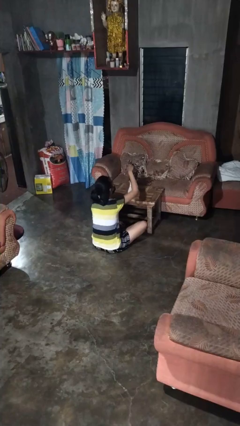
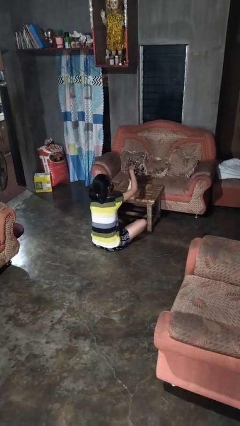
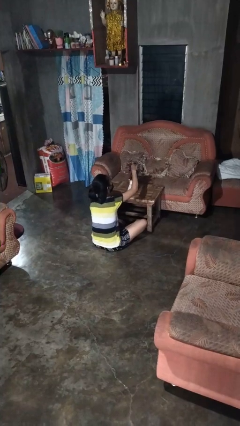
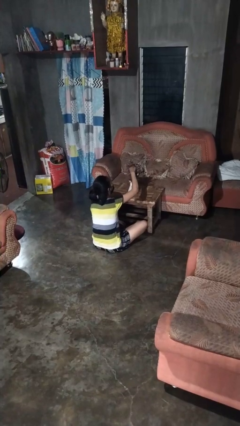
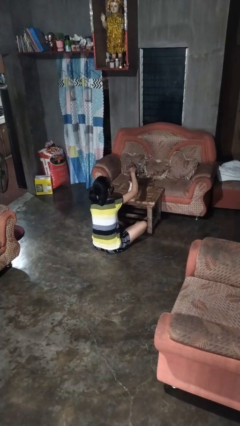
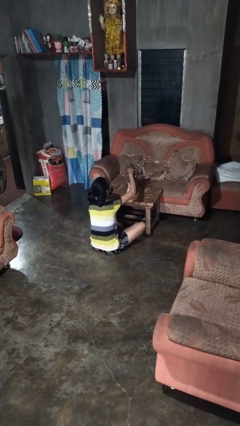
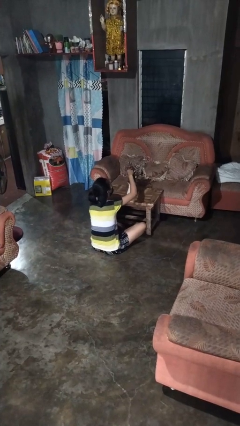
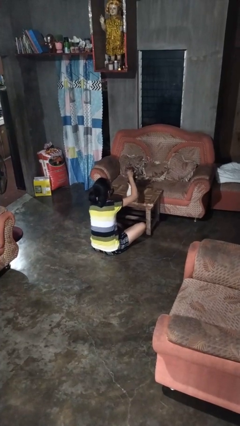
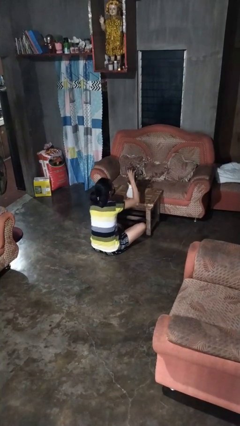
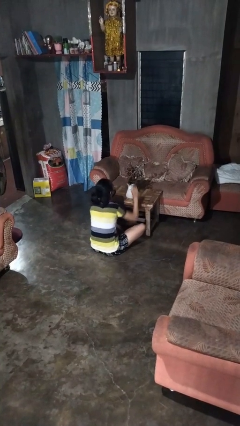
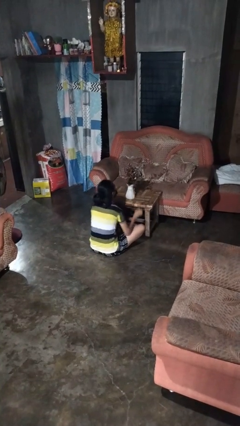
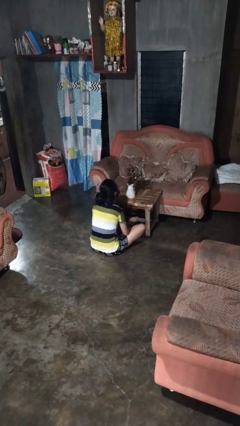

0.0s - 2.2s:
person arranges flowers in vase

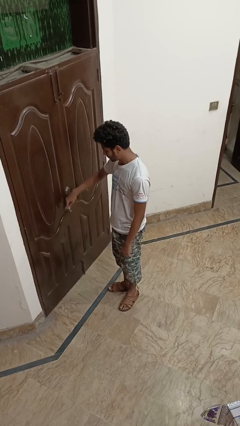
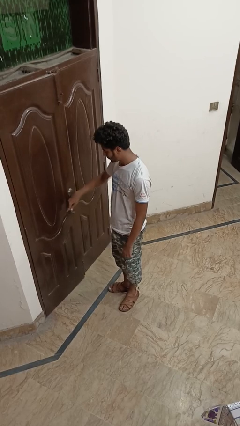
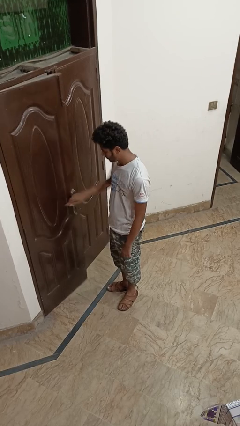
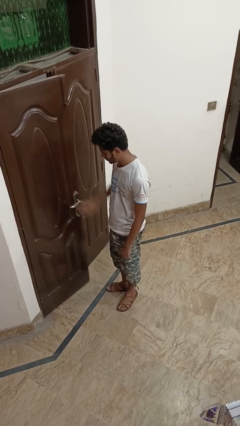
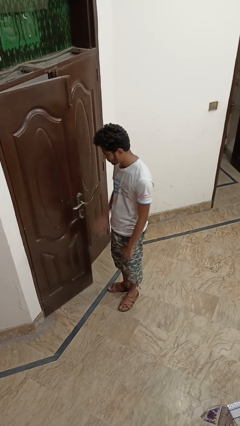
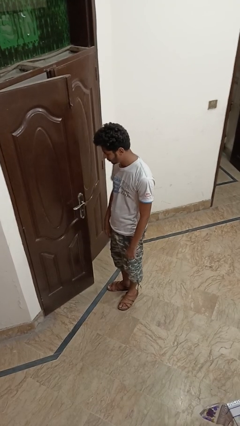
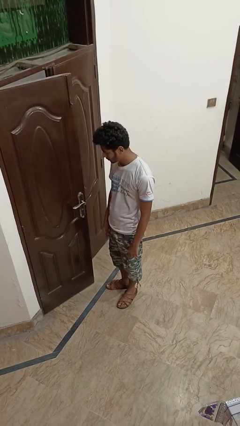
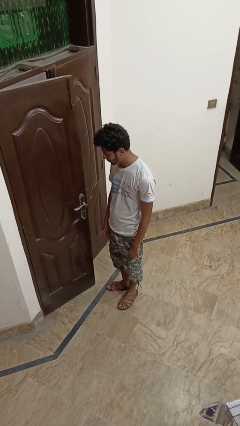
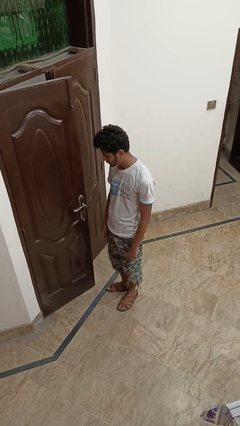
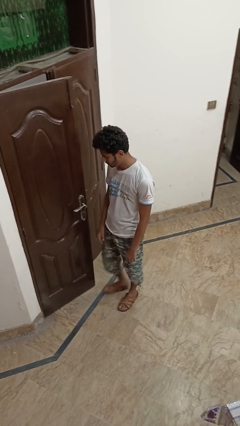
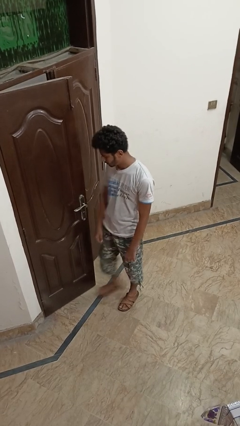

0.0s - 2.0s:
person opens facility door

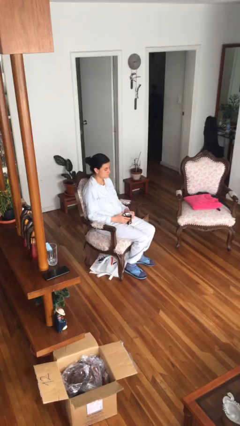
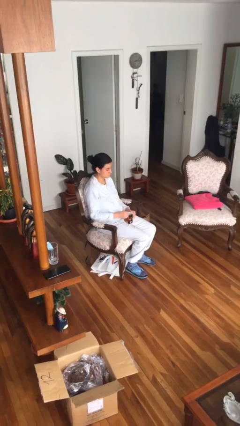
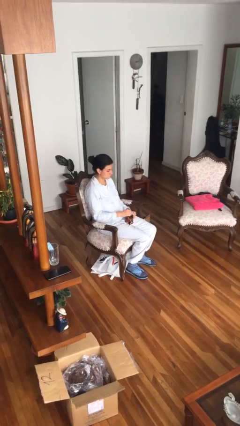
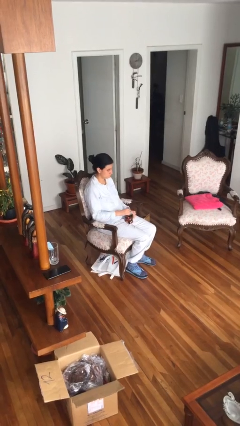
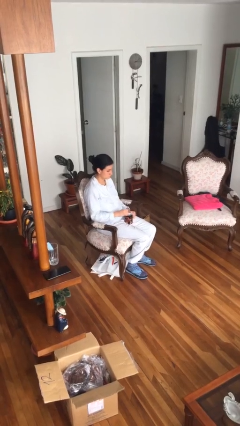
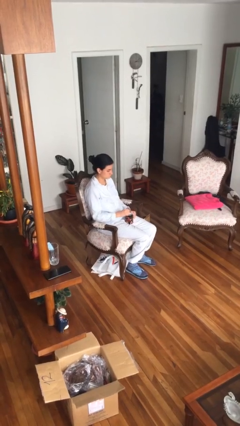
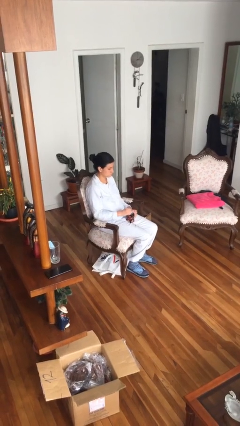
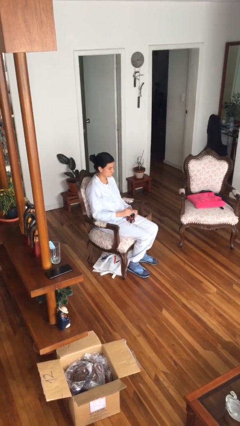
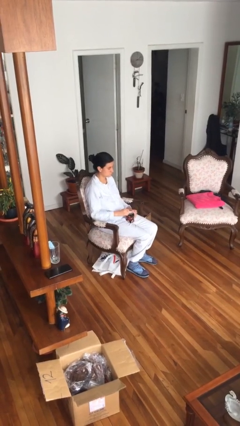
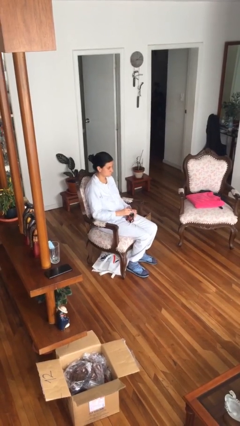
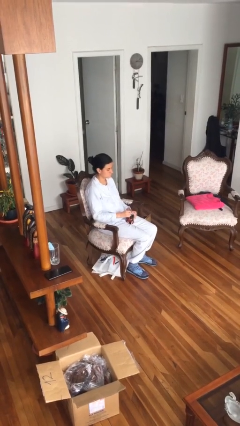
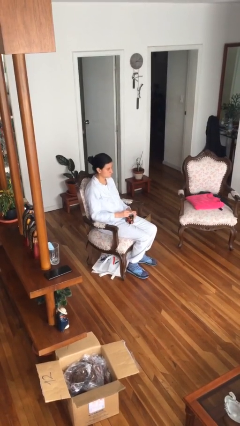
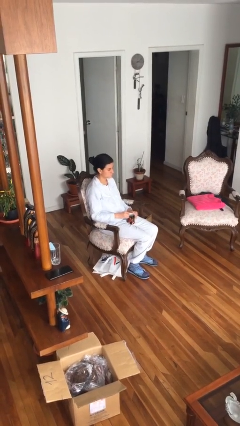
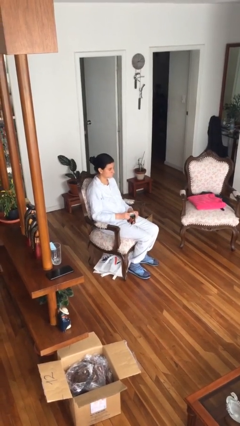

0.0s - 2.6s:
person stirs mug

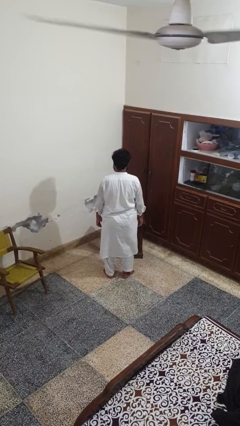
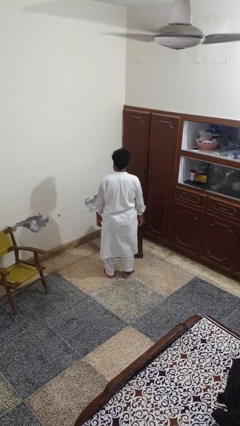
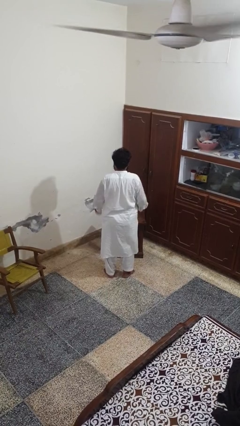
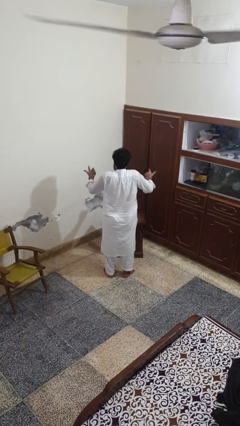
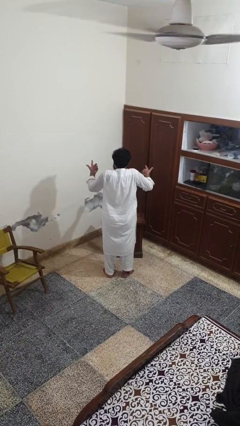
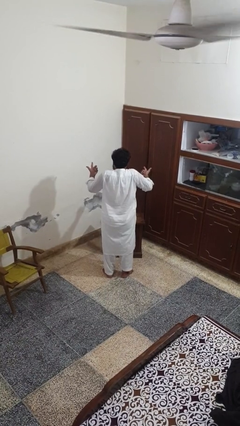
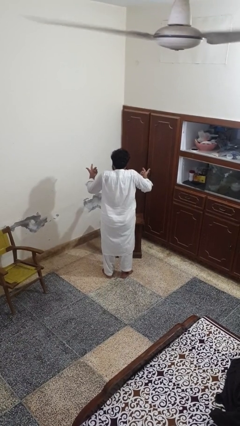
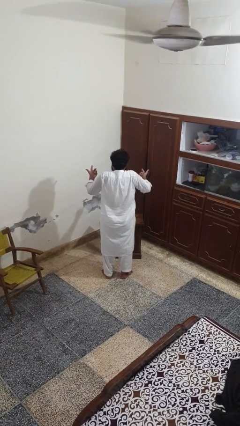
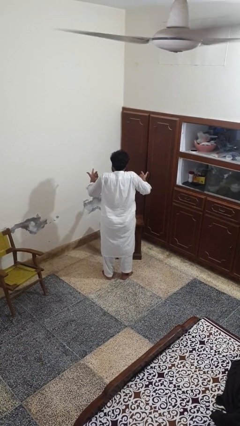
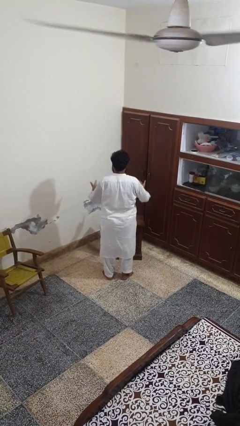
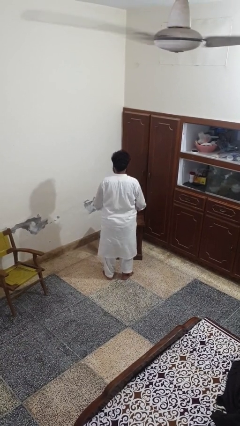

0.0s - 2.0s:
person shrugs

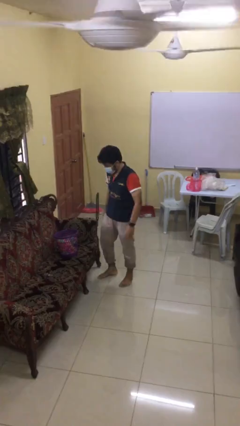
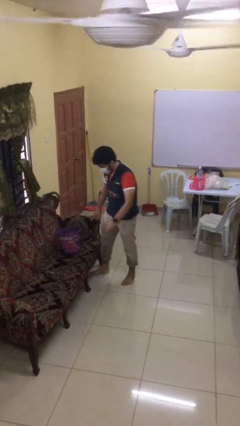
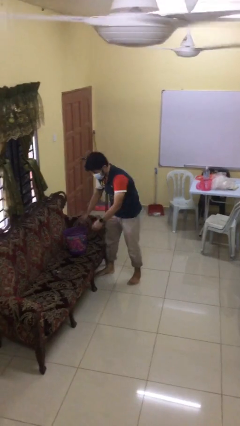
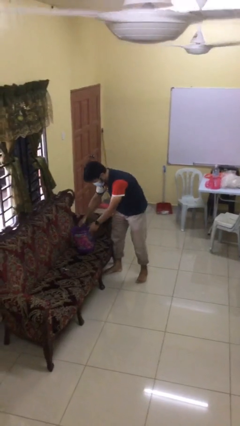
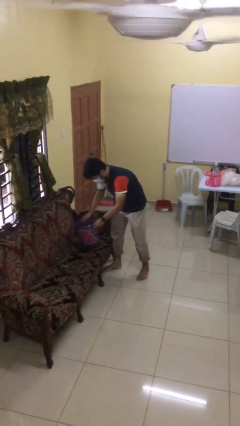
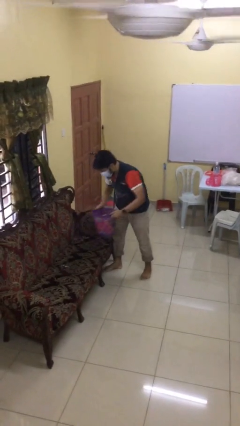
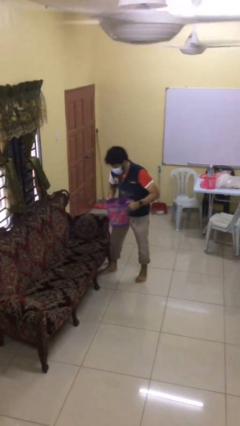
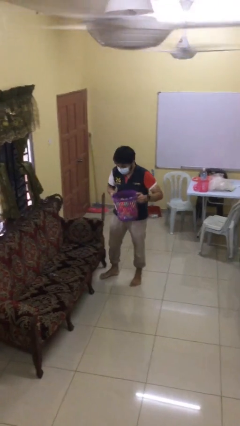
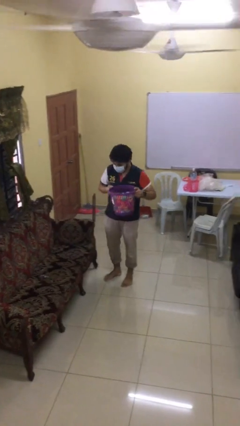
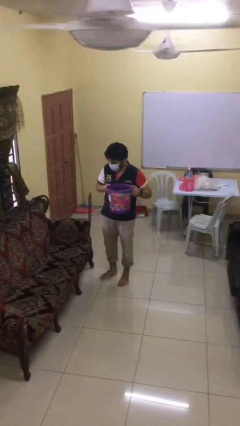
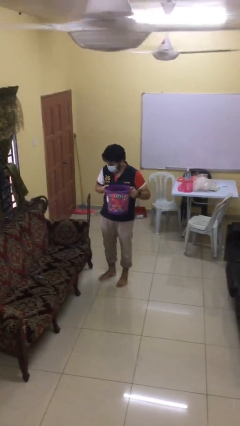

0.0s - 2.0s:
person picks up object from couch

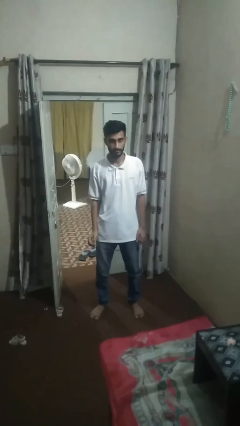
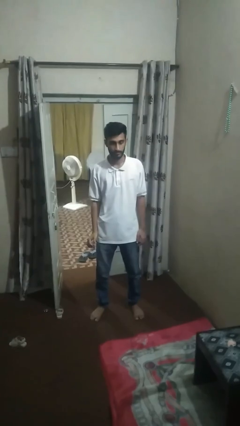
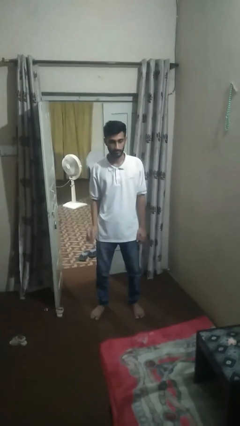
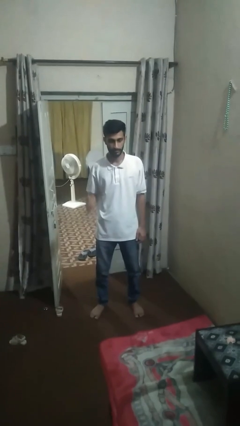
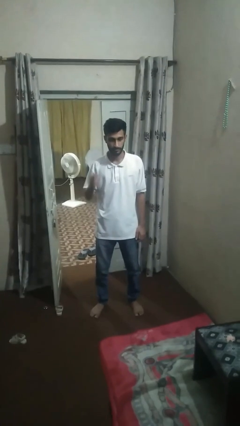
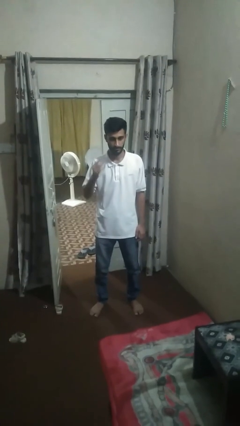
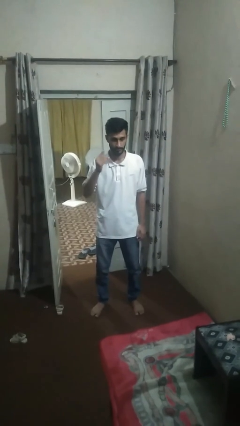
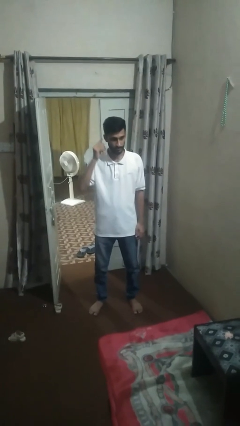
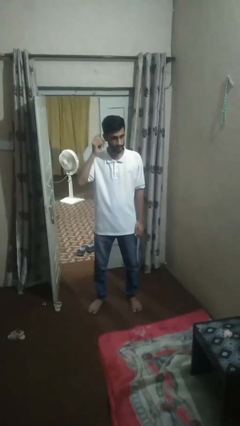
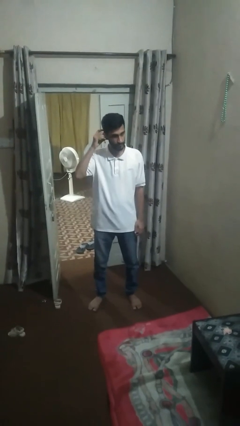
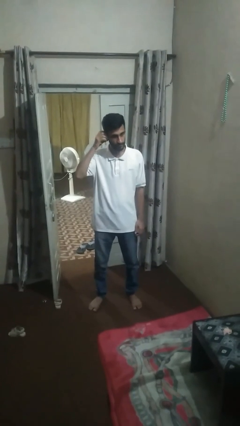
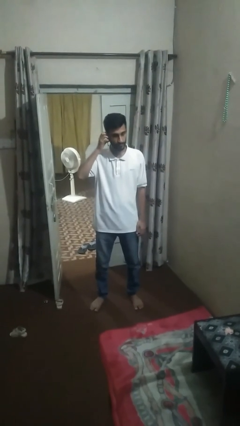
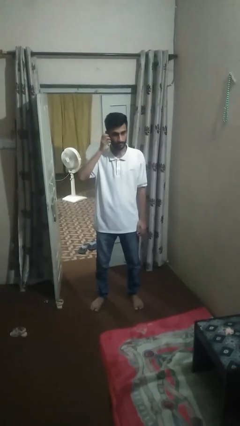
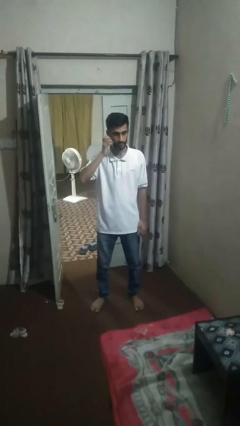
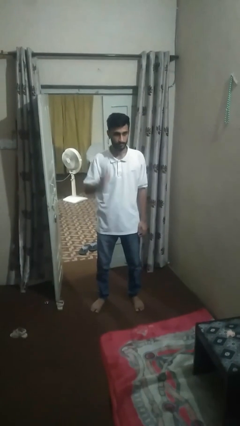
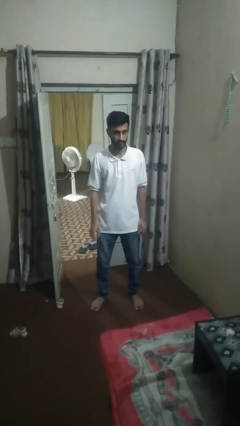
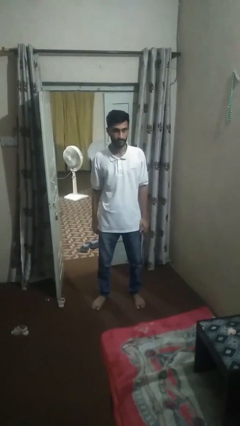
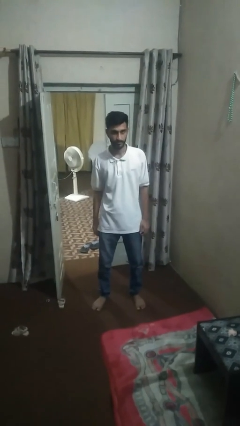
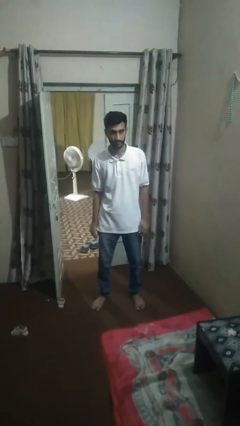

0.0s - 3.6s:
person puts on earrings

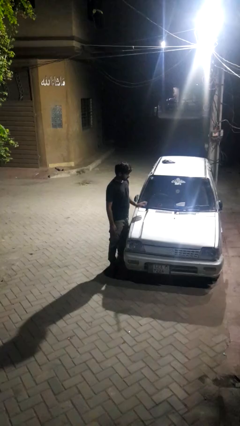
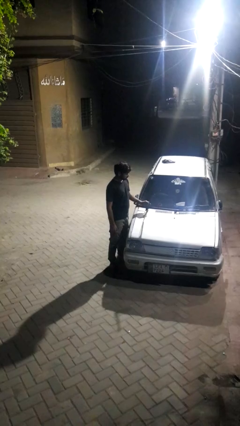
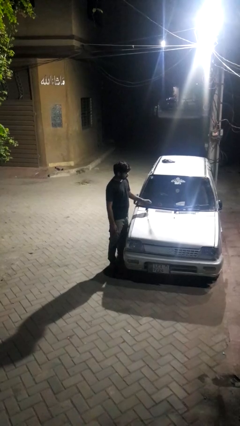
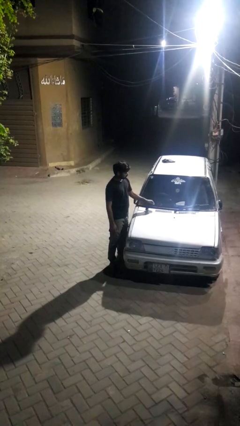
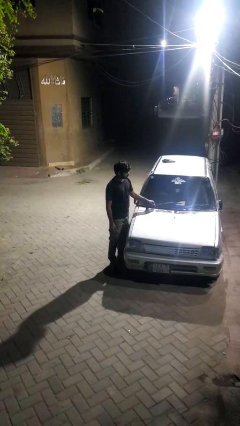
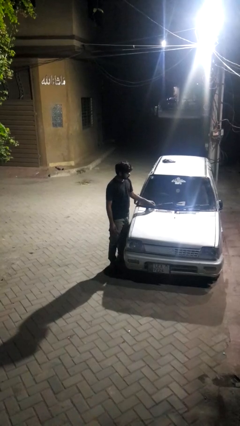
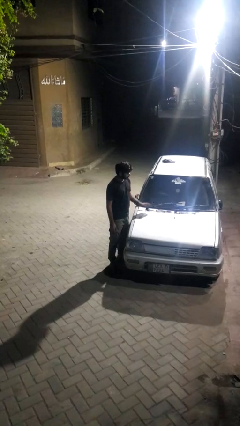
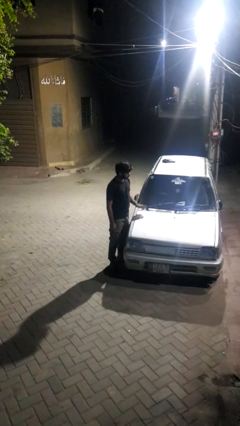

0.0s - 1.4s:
person flips down car wipers

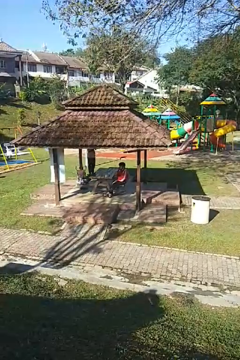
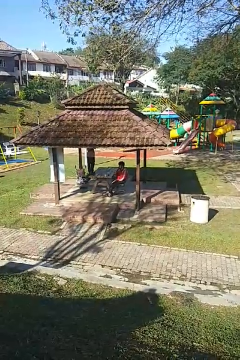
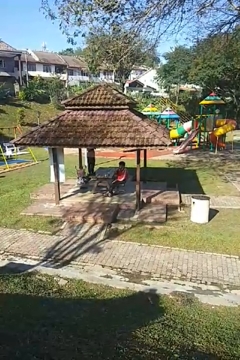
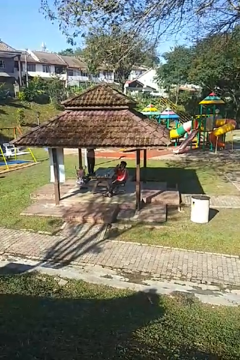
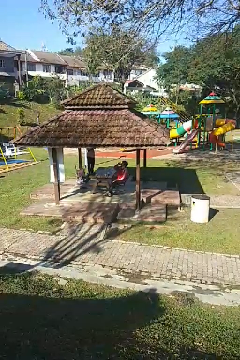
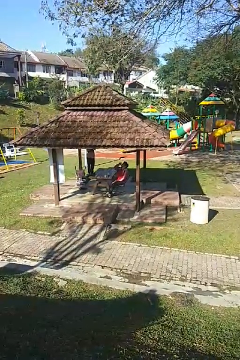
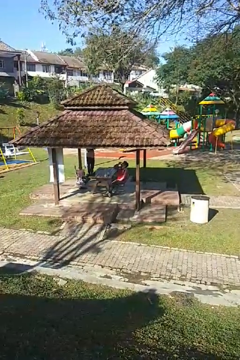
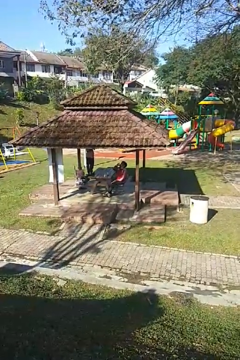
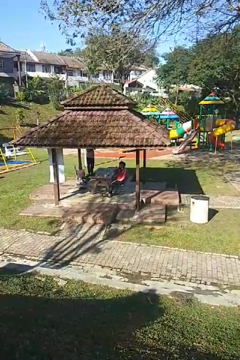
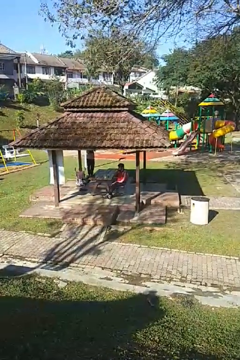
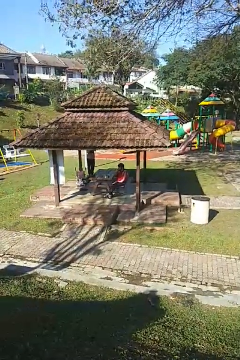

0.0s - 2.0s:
person drinks from shotglass
